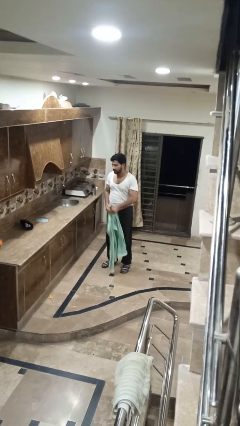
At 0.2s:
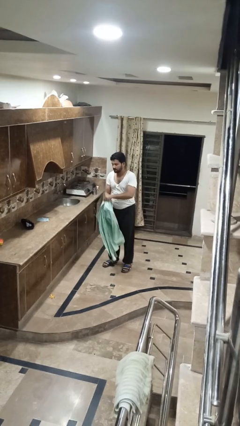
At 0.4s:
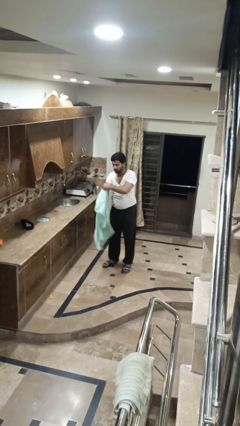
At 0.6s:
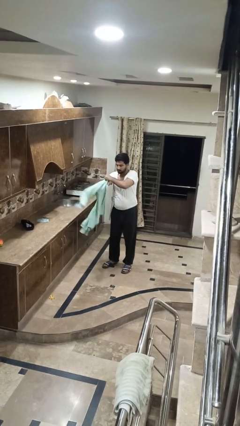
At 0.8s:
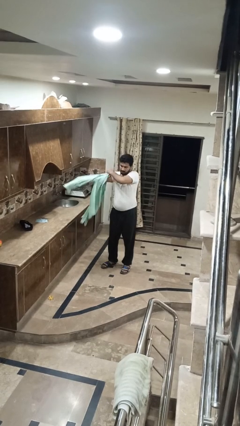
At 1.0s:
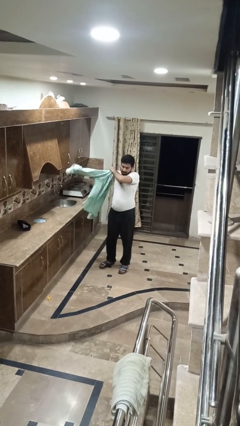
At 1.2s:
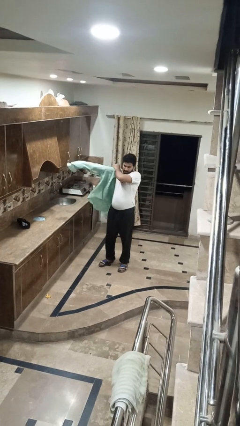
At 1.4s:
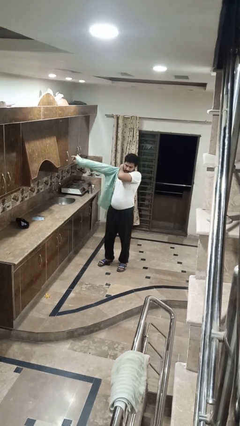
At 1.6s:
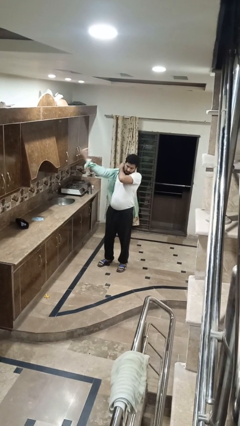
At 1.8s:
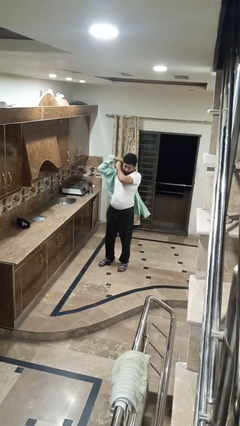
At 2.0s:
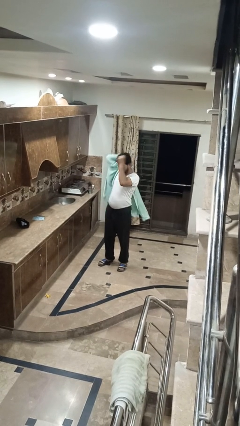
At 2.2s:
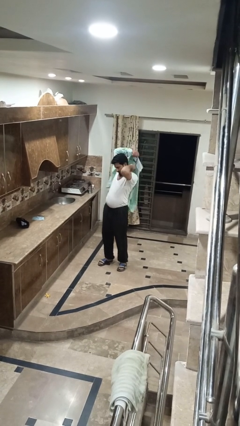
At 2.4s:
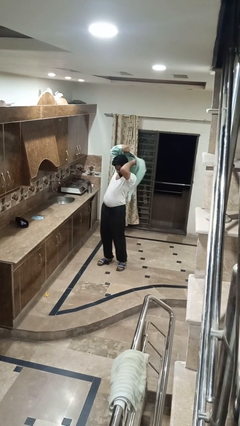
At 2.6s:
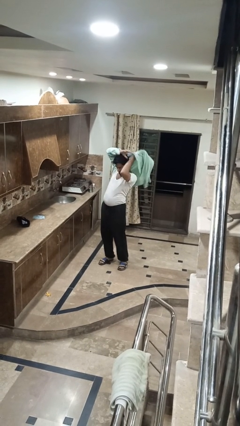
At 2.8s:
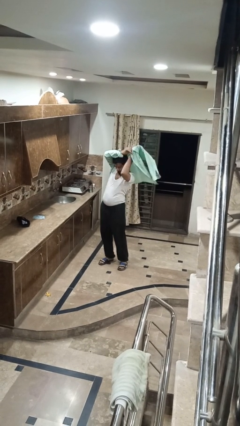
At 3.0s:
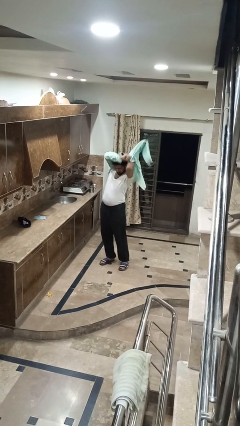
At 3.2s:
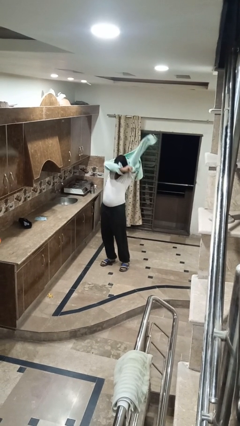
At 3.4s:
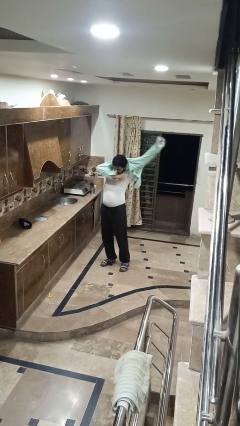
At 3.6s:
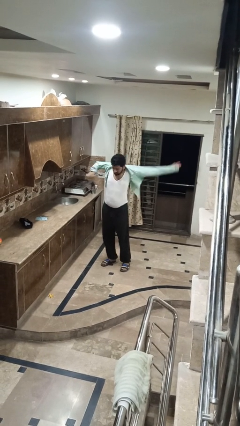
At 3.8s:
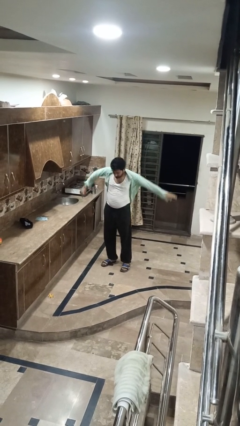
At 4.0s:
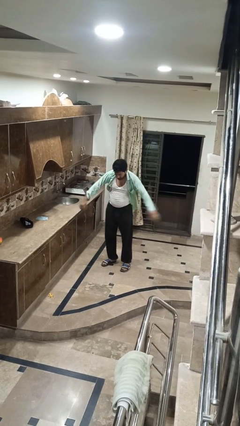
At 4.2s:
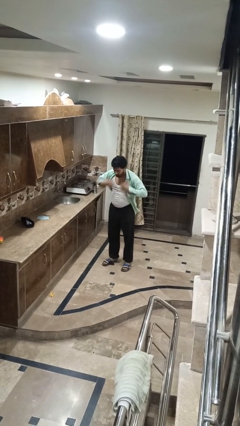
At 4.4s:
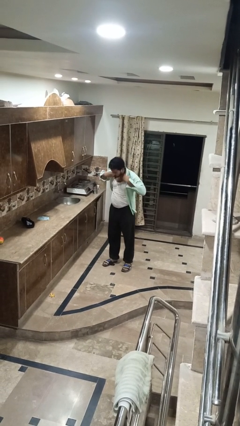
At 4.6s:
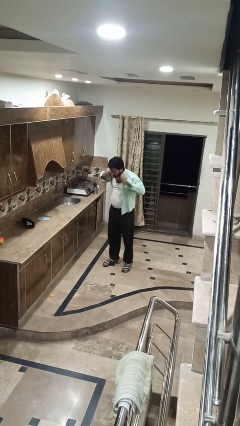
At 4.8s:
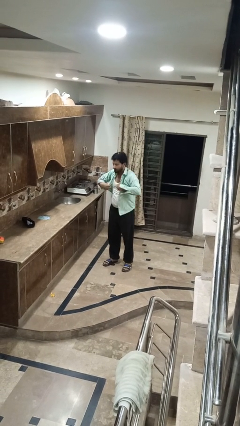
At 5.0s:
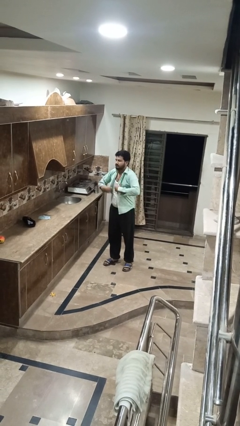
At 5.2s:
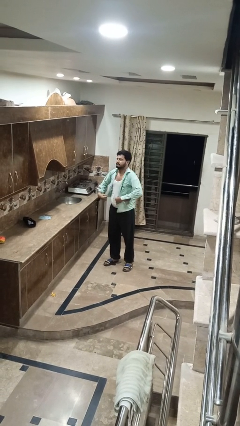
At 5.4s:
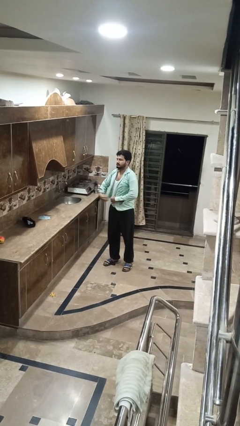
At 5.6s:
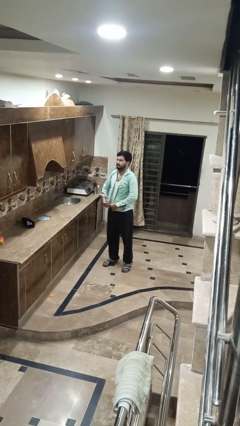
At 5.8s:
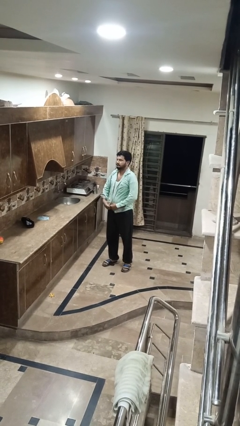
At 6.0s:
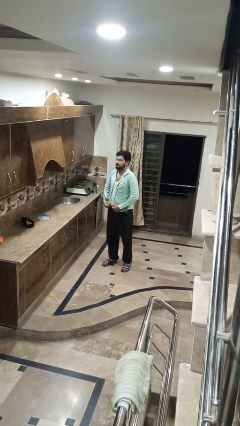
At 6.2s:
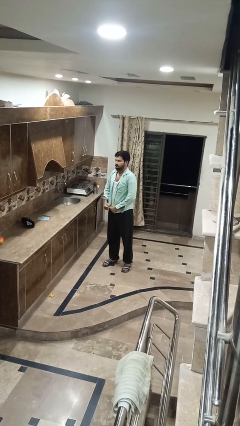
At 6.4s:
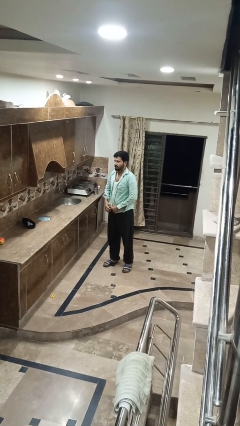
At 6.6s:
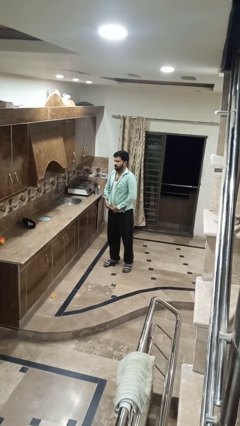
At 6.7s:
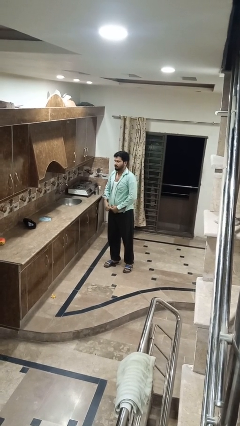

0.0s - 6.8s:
person puts on shirt

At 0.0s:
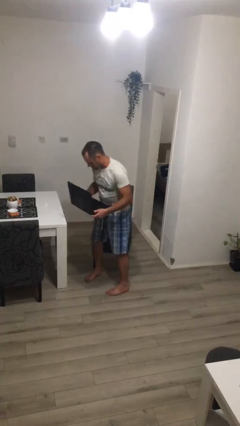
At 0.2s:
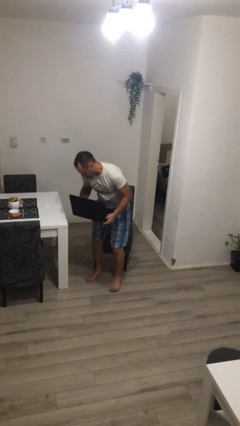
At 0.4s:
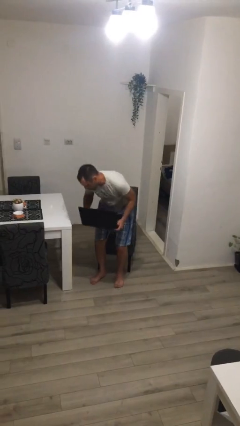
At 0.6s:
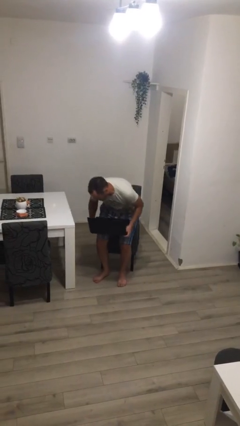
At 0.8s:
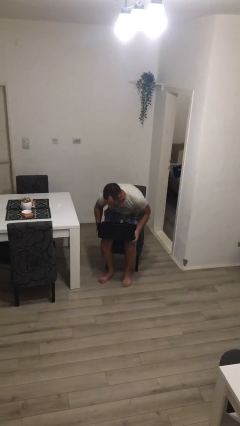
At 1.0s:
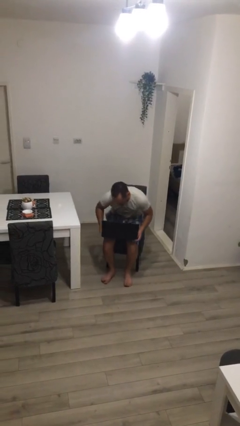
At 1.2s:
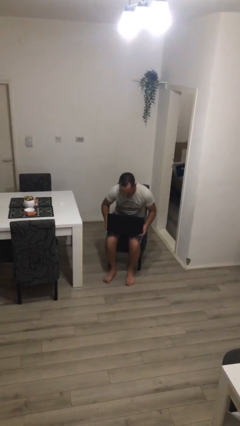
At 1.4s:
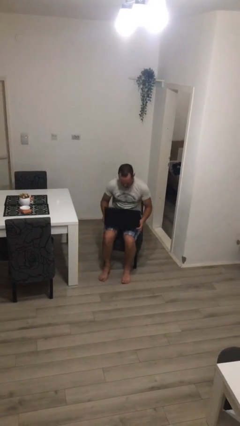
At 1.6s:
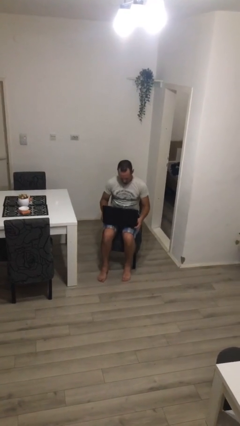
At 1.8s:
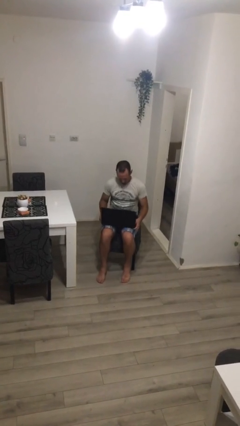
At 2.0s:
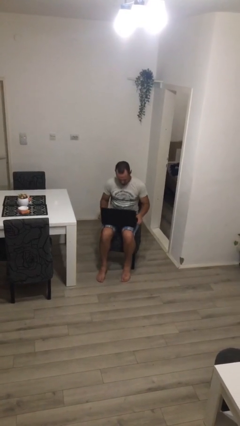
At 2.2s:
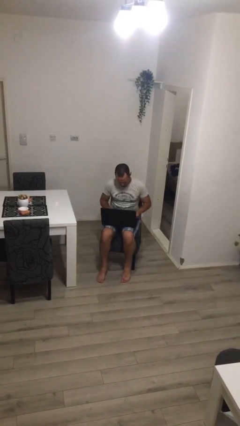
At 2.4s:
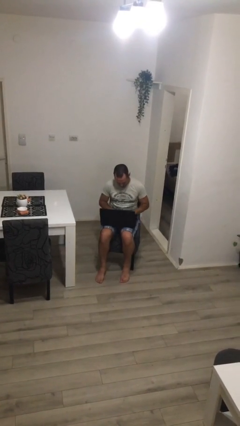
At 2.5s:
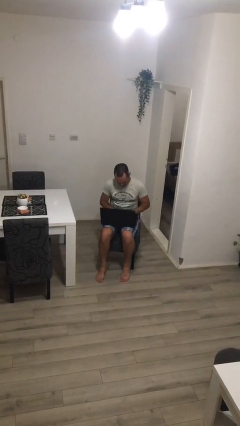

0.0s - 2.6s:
person sits down

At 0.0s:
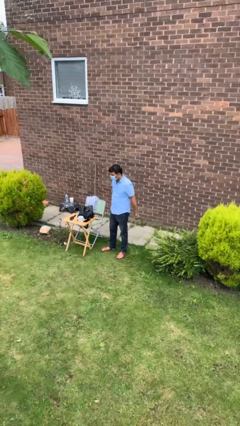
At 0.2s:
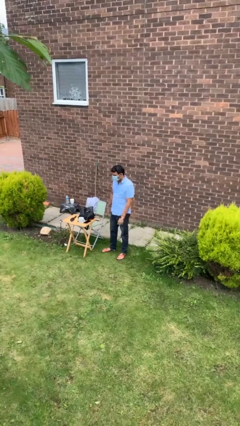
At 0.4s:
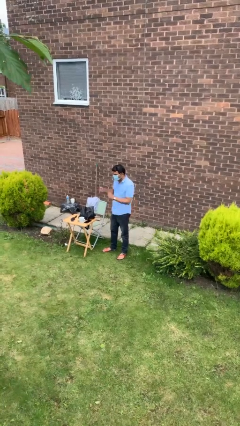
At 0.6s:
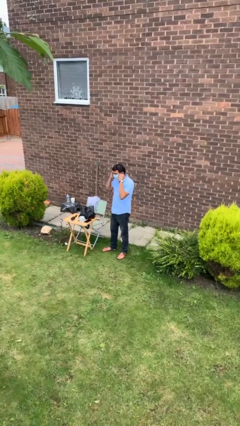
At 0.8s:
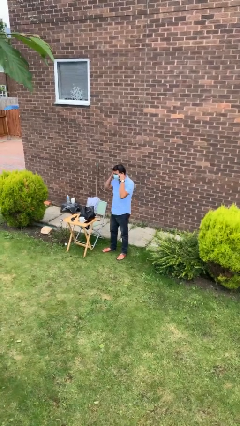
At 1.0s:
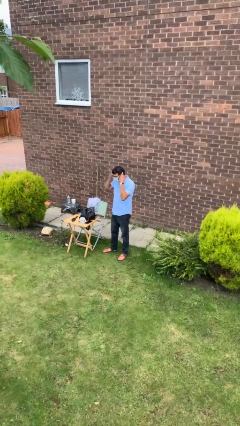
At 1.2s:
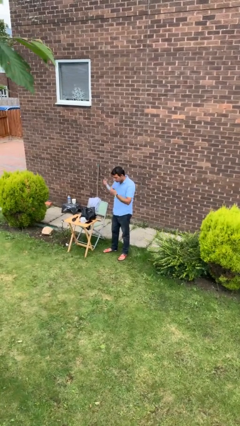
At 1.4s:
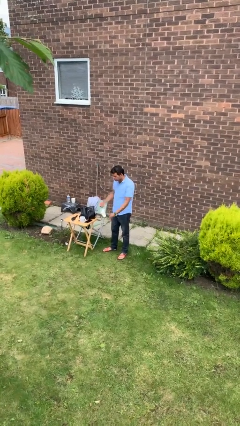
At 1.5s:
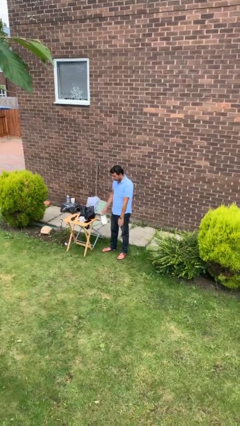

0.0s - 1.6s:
person takes off facemask

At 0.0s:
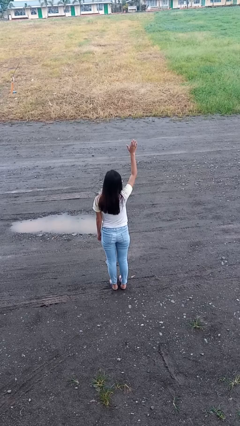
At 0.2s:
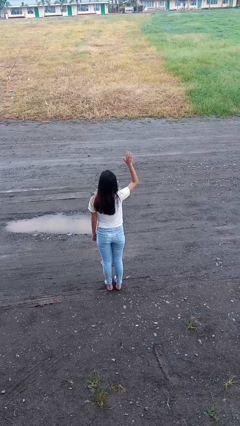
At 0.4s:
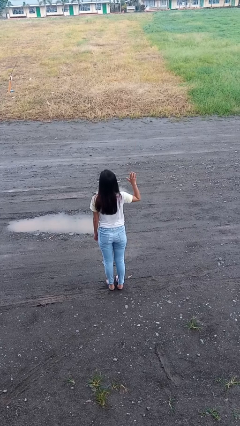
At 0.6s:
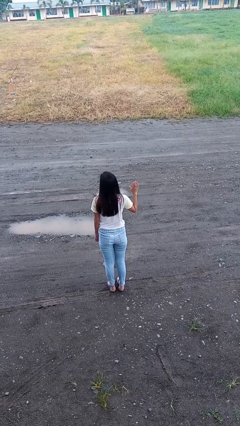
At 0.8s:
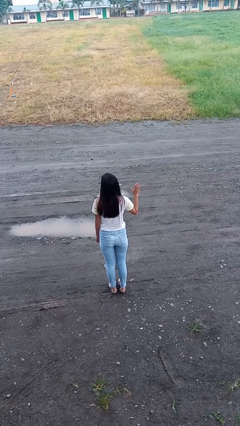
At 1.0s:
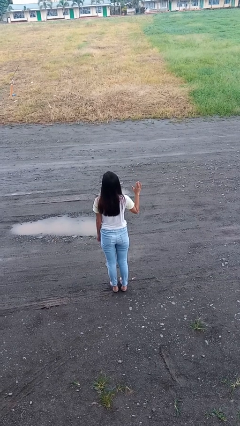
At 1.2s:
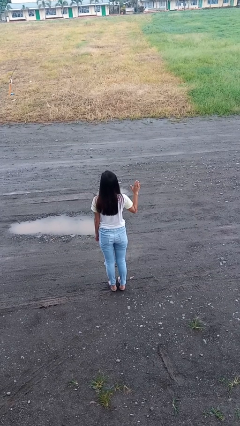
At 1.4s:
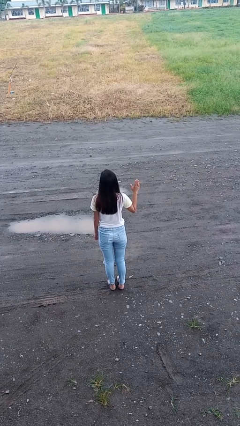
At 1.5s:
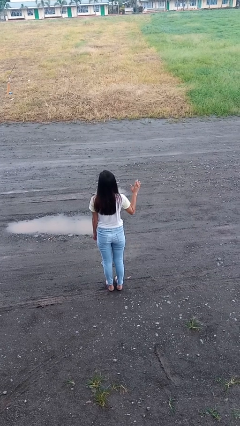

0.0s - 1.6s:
person gestures lower hand

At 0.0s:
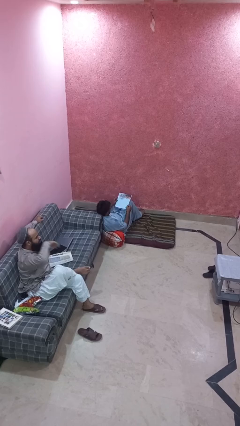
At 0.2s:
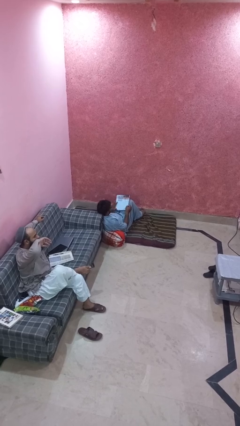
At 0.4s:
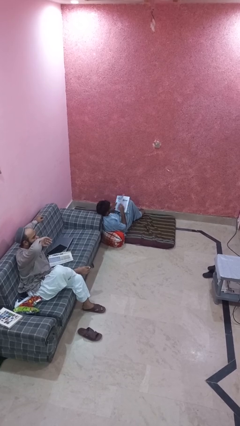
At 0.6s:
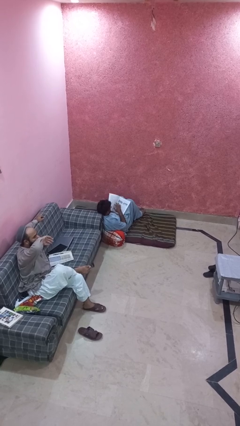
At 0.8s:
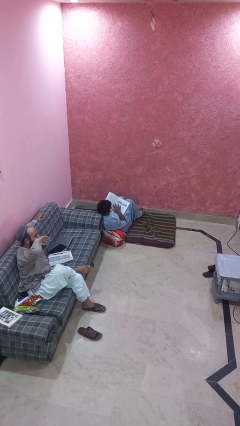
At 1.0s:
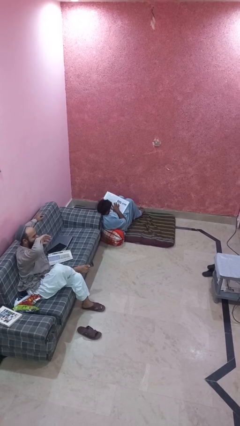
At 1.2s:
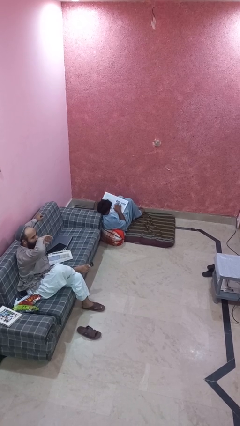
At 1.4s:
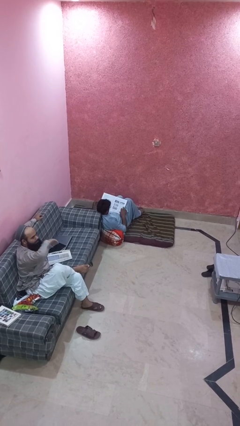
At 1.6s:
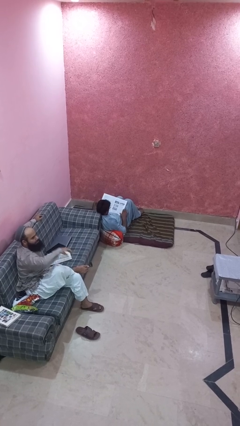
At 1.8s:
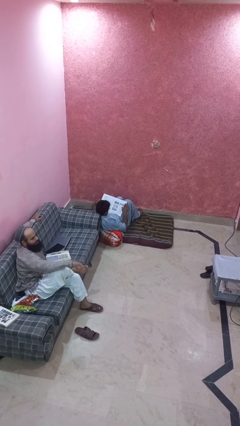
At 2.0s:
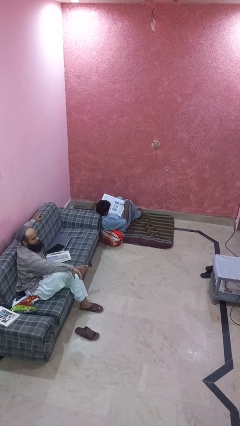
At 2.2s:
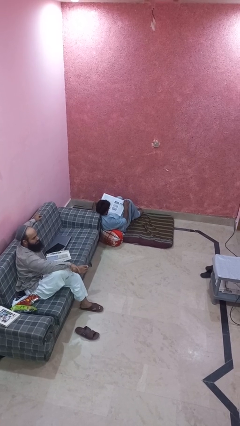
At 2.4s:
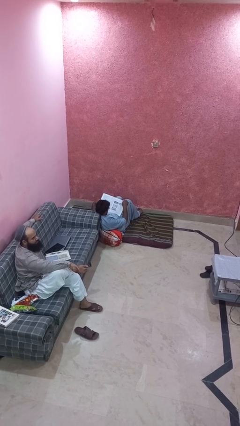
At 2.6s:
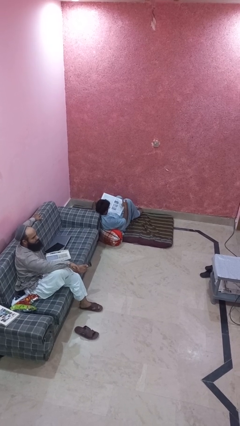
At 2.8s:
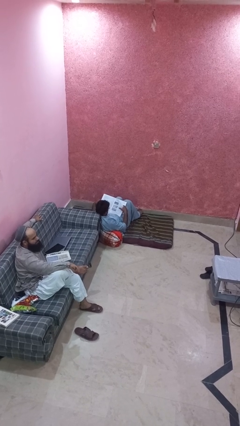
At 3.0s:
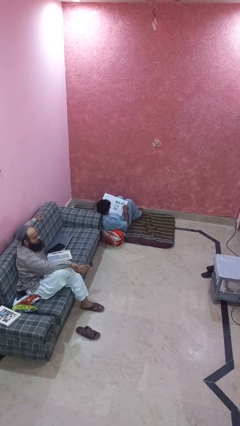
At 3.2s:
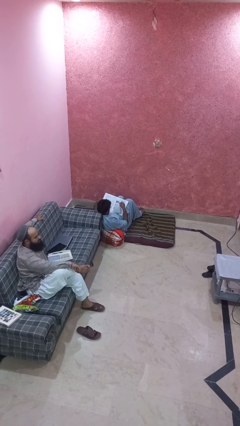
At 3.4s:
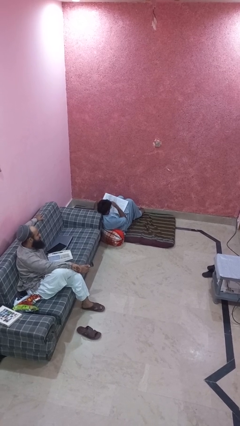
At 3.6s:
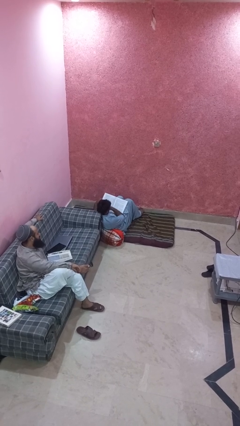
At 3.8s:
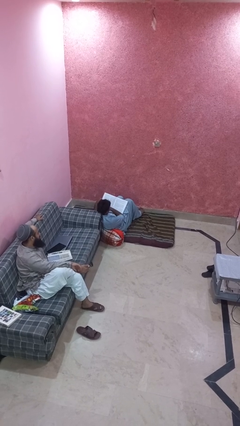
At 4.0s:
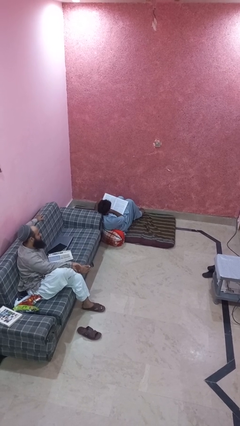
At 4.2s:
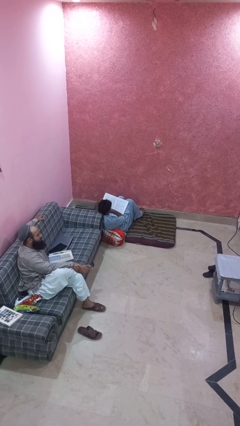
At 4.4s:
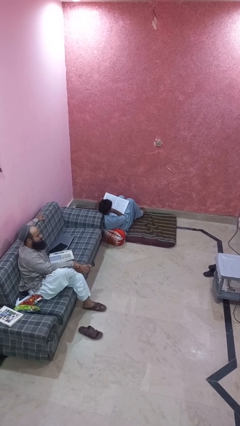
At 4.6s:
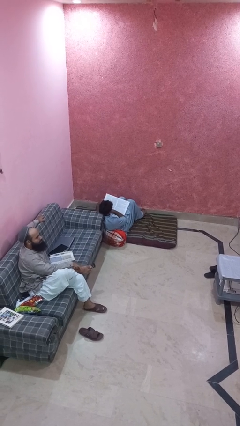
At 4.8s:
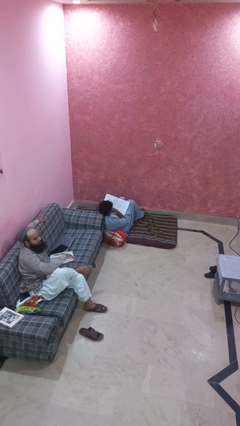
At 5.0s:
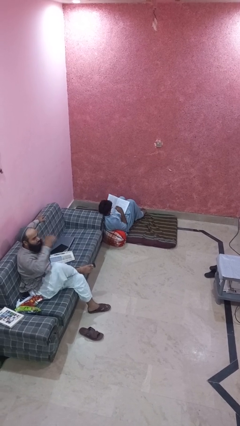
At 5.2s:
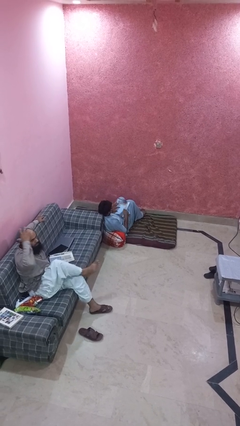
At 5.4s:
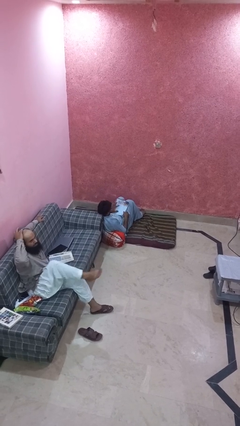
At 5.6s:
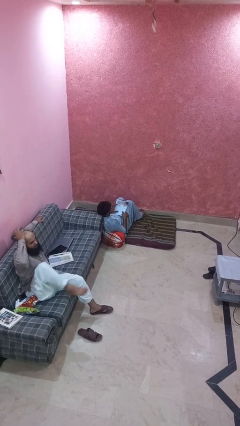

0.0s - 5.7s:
person reads magazine
